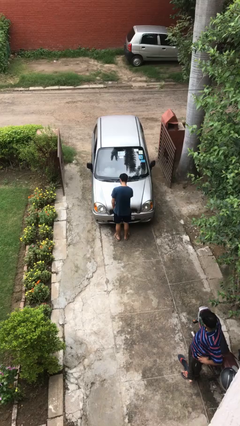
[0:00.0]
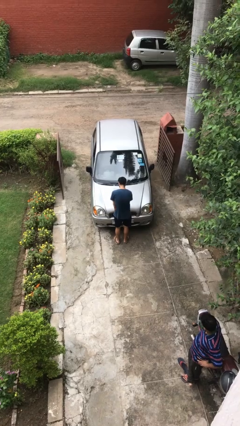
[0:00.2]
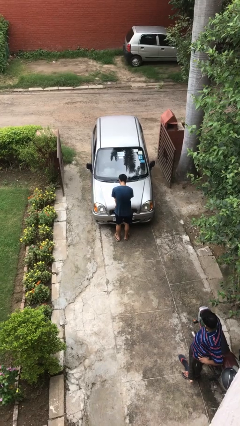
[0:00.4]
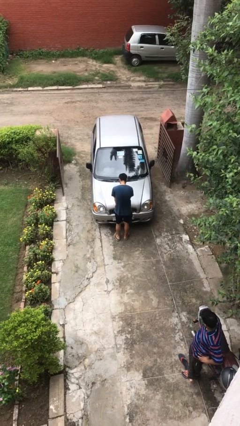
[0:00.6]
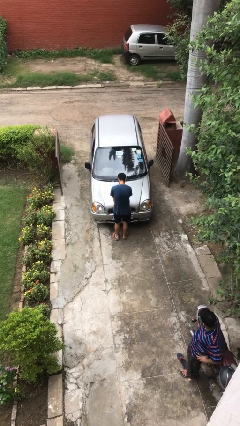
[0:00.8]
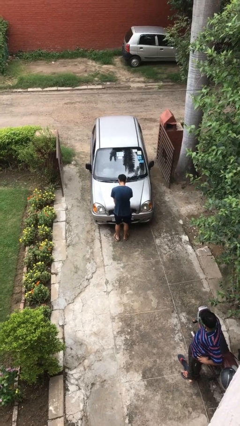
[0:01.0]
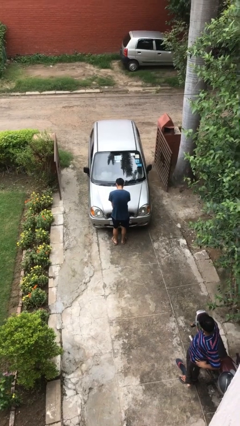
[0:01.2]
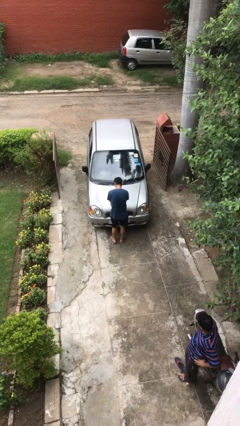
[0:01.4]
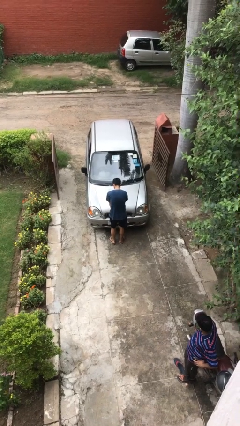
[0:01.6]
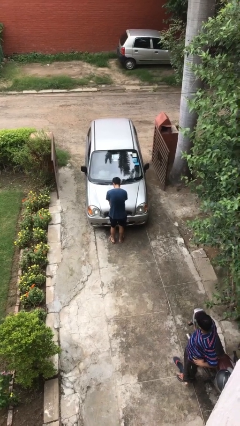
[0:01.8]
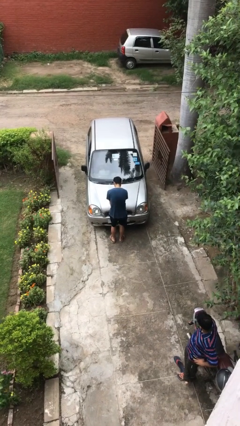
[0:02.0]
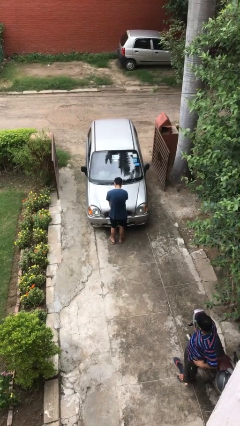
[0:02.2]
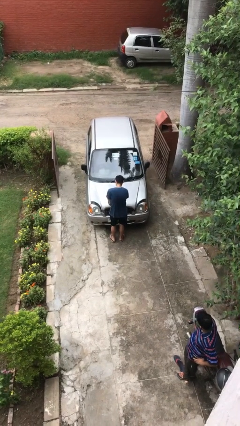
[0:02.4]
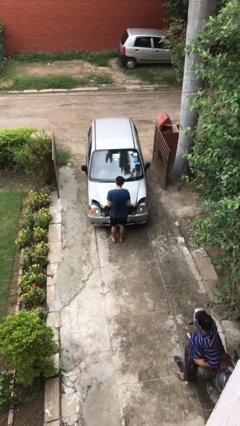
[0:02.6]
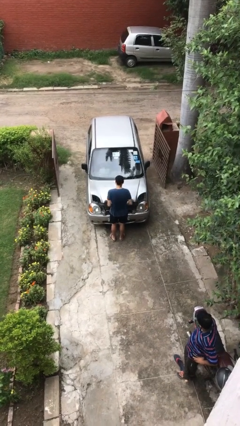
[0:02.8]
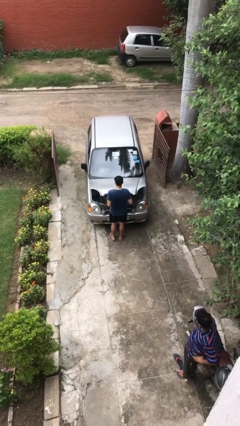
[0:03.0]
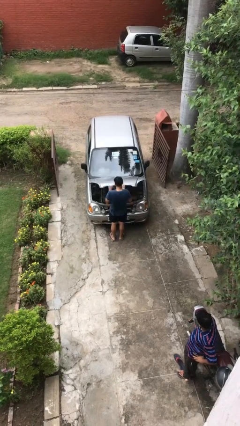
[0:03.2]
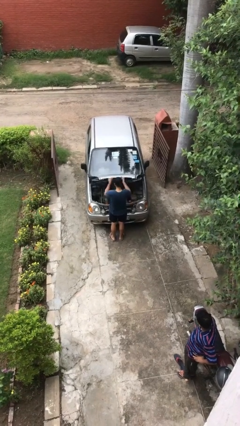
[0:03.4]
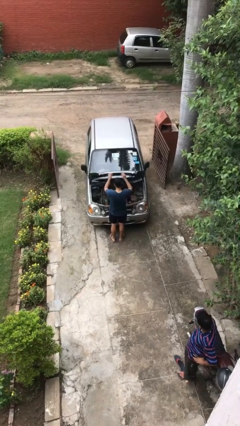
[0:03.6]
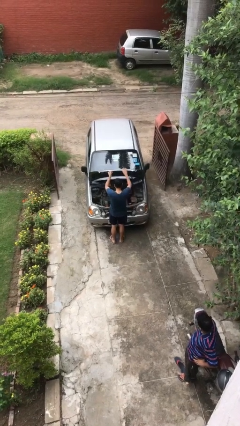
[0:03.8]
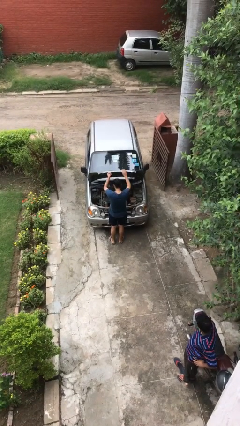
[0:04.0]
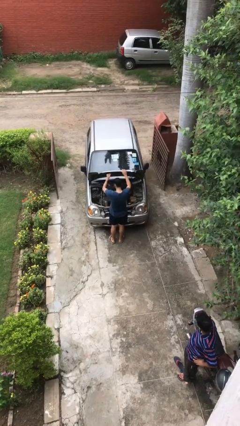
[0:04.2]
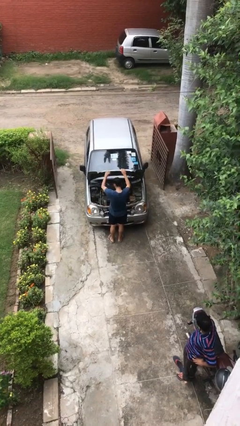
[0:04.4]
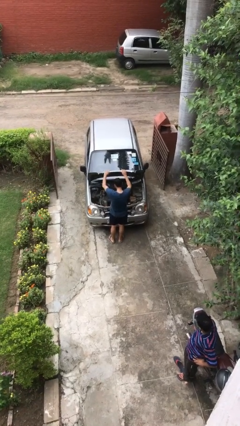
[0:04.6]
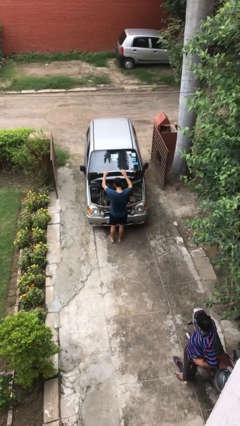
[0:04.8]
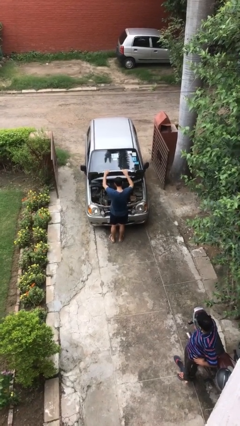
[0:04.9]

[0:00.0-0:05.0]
person opens car hood

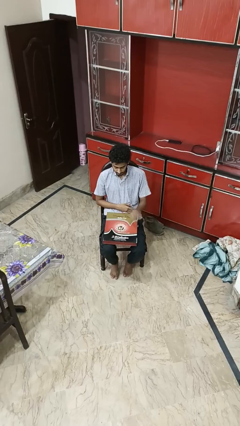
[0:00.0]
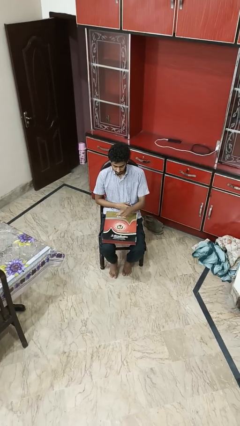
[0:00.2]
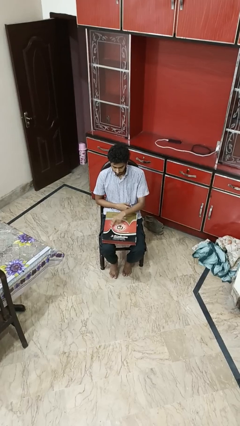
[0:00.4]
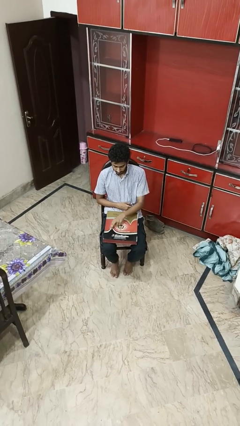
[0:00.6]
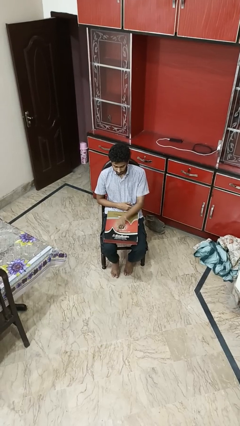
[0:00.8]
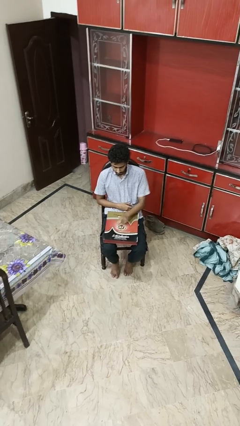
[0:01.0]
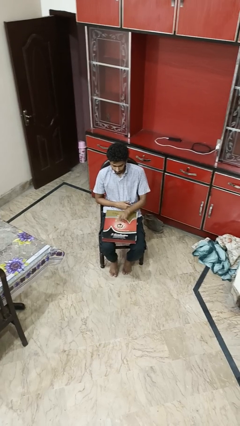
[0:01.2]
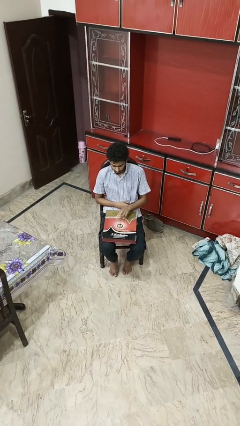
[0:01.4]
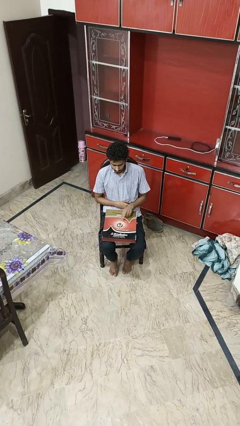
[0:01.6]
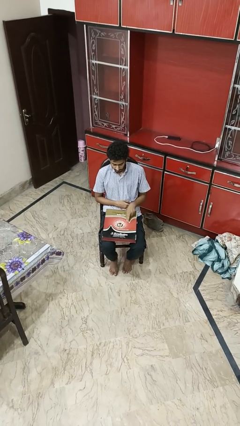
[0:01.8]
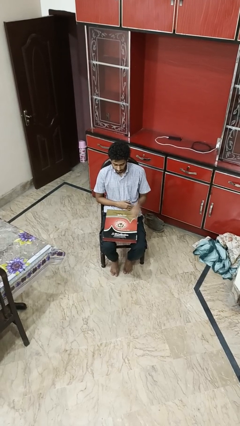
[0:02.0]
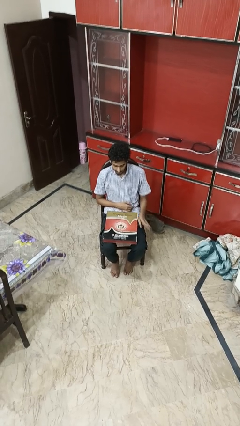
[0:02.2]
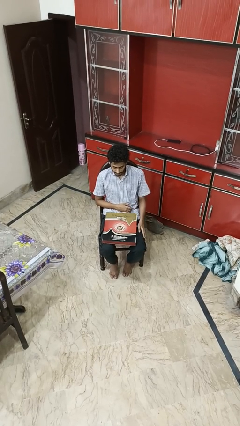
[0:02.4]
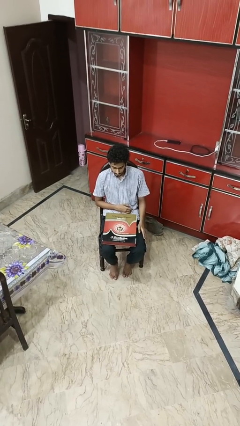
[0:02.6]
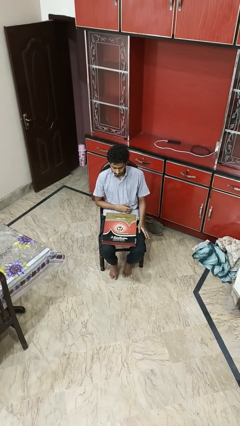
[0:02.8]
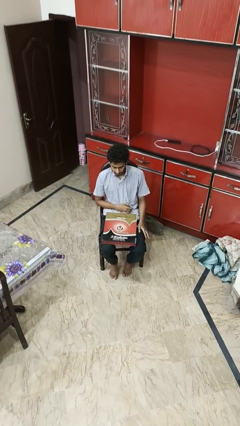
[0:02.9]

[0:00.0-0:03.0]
person taps object with finger

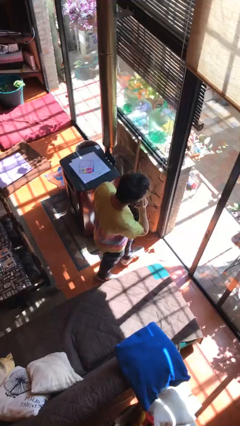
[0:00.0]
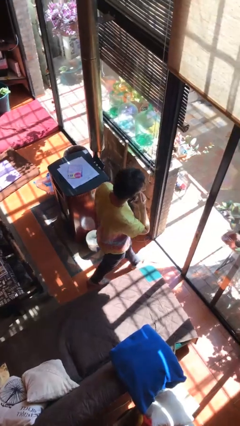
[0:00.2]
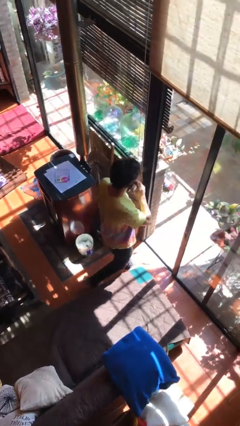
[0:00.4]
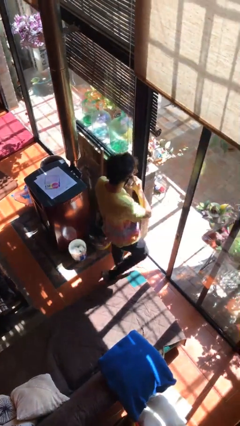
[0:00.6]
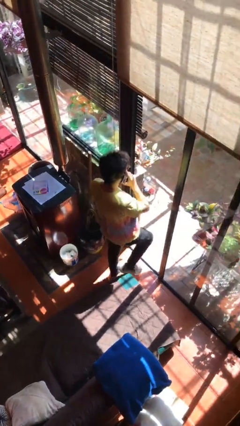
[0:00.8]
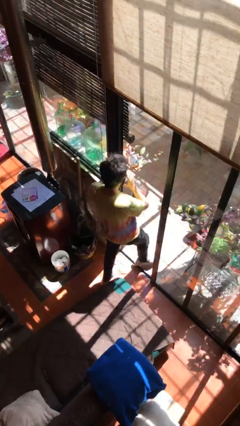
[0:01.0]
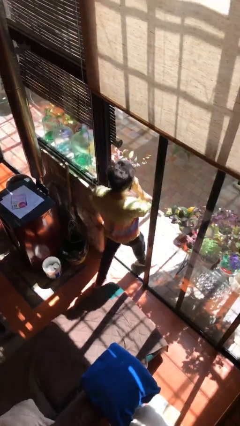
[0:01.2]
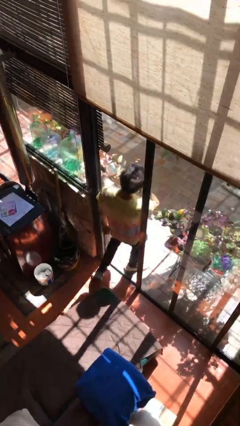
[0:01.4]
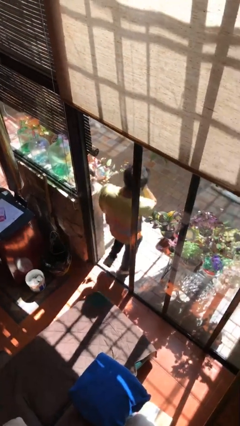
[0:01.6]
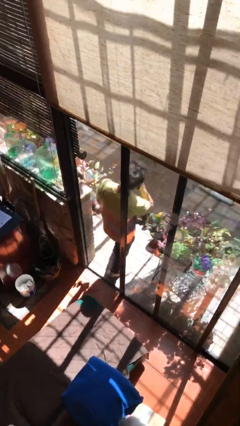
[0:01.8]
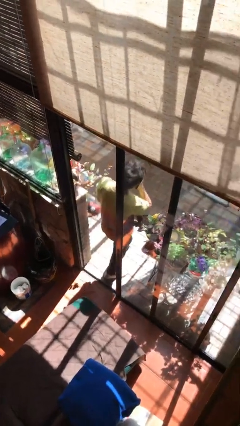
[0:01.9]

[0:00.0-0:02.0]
person exits scene through structure

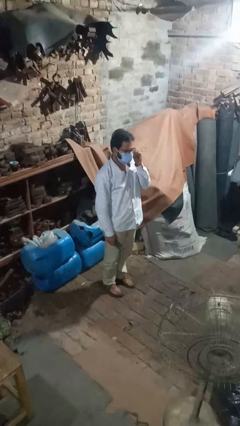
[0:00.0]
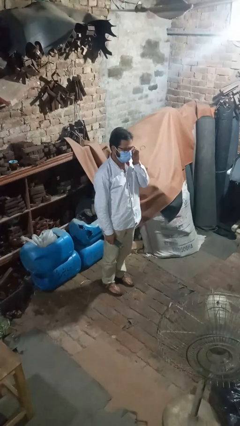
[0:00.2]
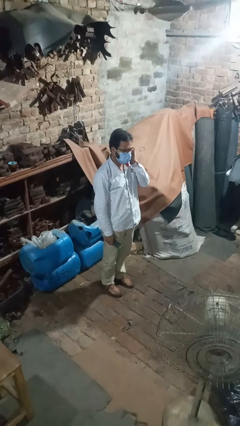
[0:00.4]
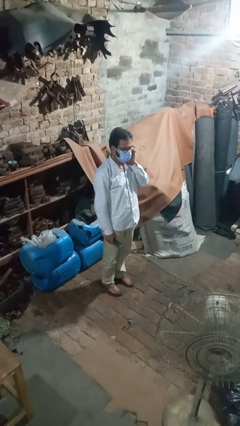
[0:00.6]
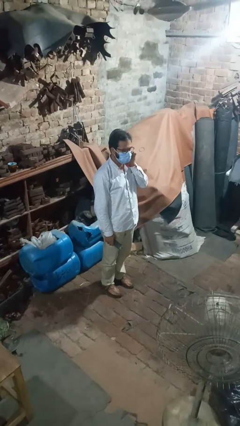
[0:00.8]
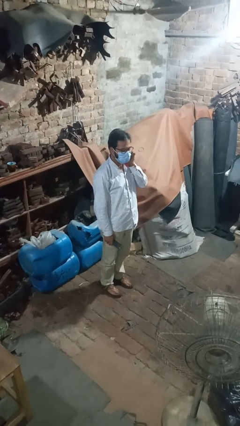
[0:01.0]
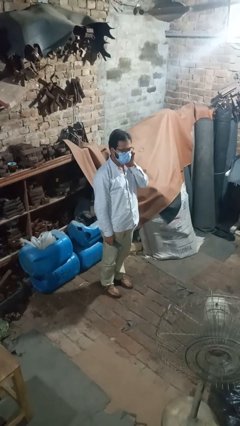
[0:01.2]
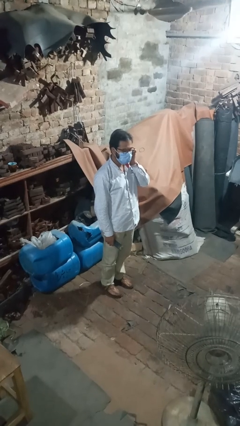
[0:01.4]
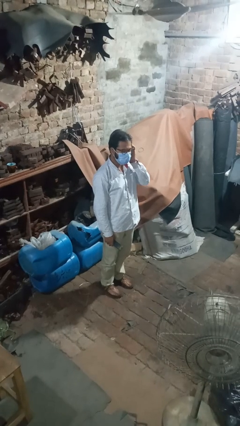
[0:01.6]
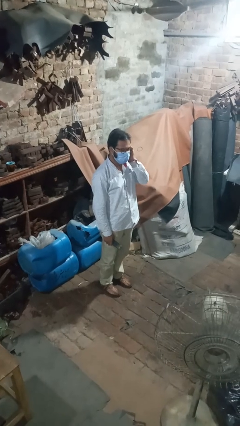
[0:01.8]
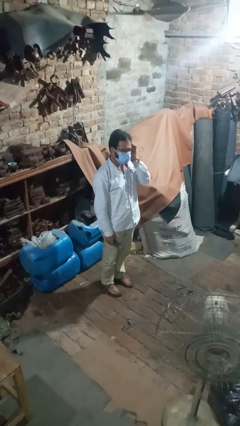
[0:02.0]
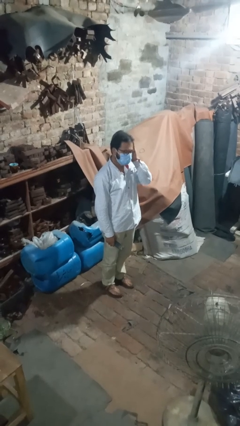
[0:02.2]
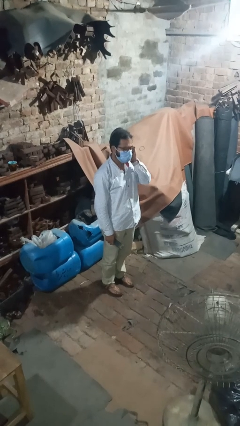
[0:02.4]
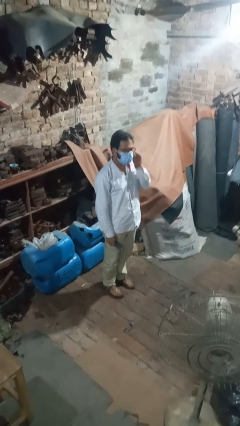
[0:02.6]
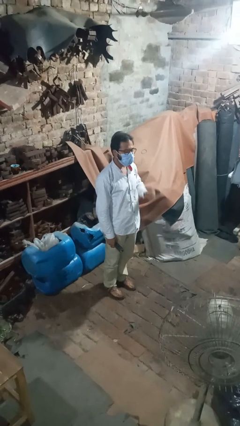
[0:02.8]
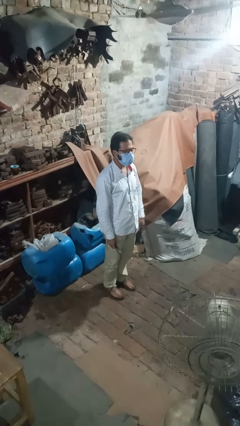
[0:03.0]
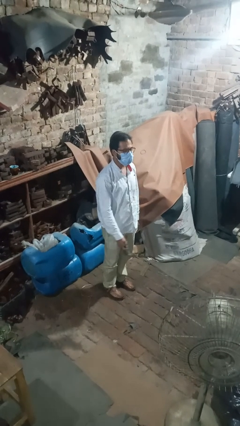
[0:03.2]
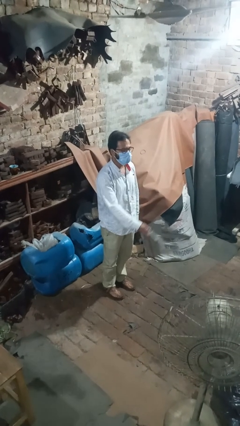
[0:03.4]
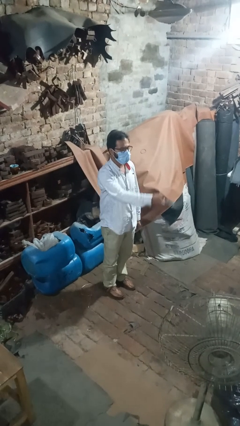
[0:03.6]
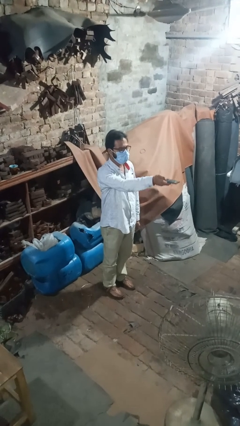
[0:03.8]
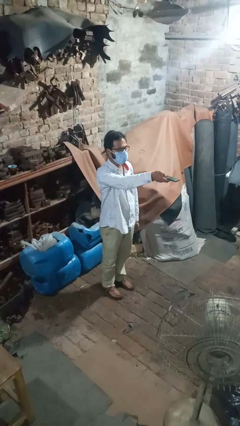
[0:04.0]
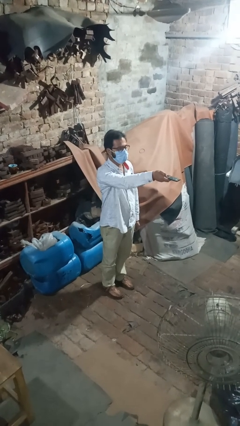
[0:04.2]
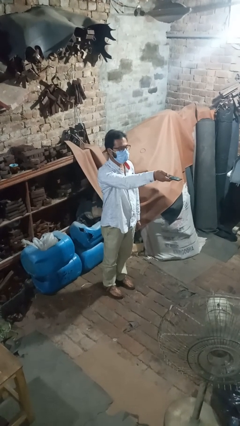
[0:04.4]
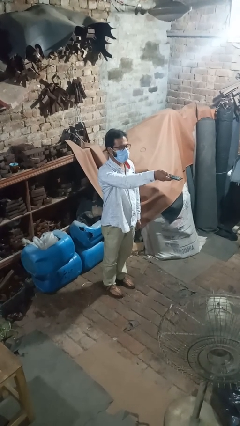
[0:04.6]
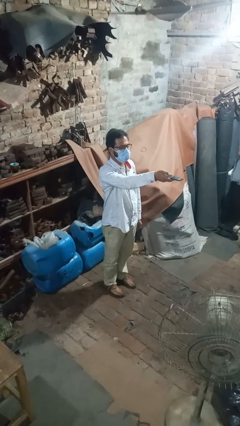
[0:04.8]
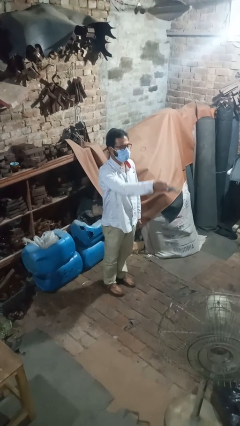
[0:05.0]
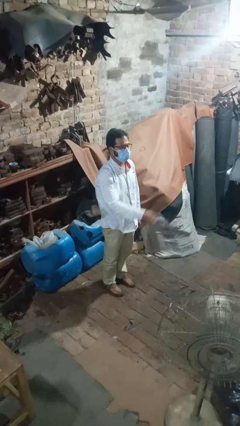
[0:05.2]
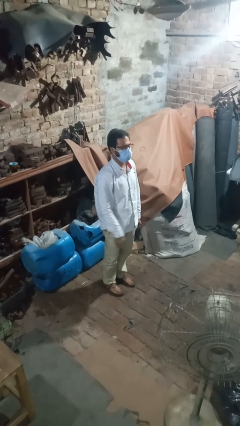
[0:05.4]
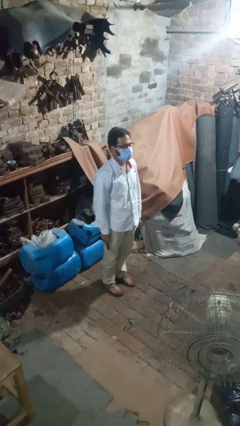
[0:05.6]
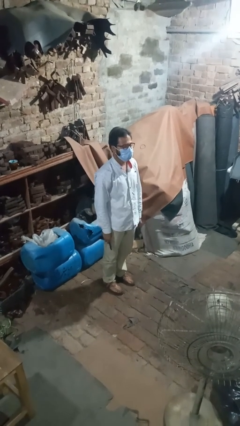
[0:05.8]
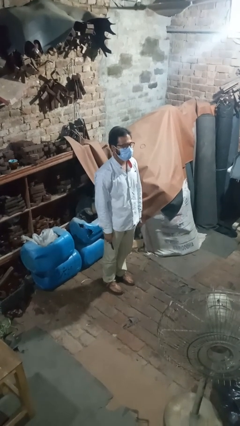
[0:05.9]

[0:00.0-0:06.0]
person uses television remote

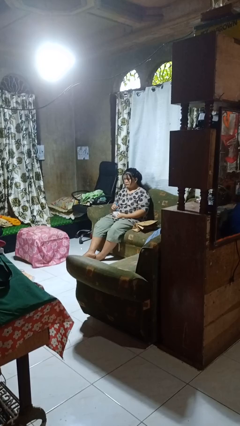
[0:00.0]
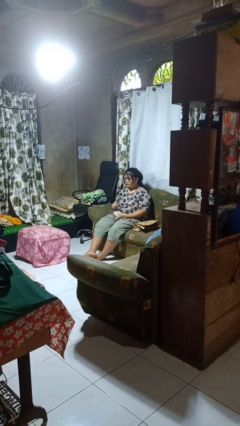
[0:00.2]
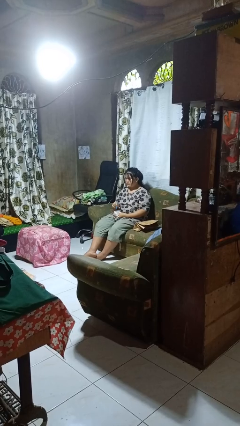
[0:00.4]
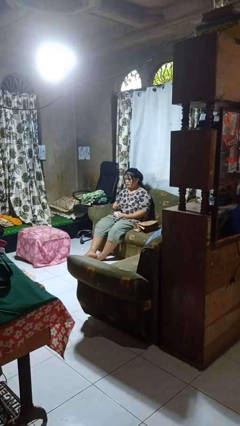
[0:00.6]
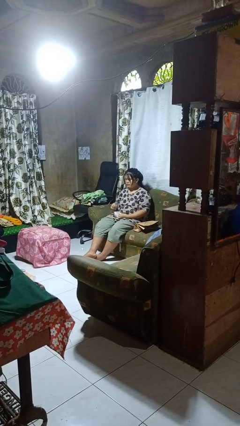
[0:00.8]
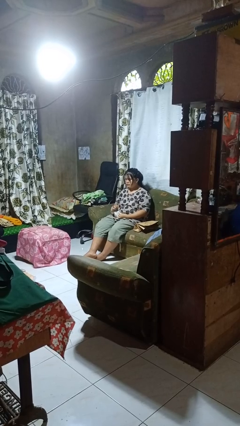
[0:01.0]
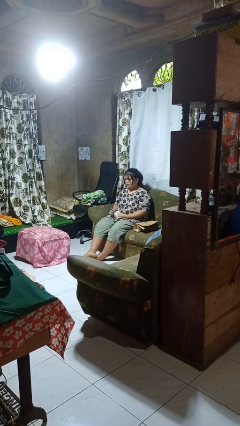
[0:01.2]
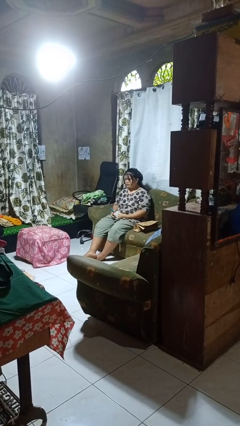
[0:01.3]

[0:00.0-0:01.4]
person stirs mug
